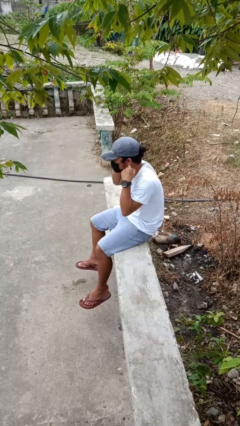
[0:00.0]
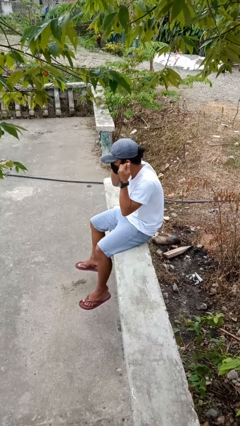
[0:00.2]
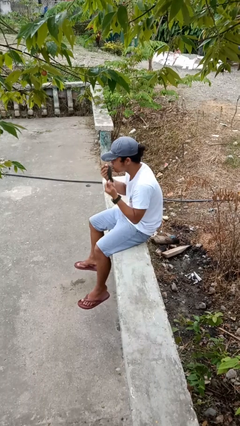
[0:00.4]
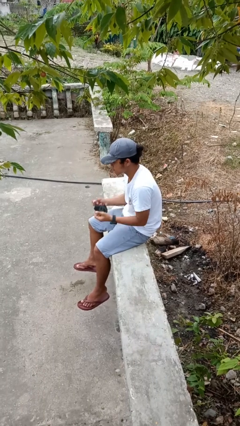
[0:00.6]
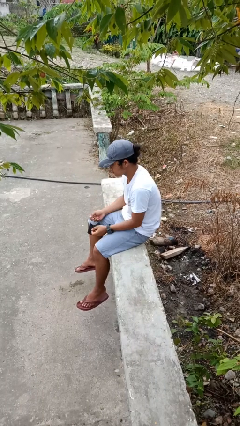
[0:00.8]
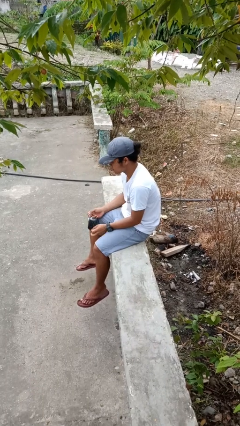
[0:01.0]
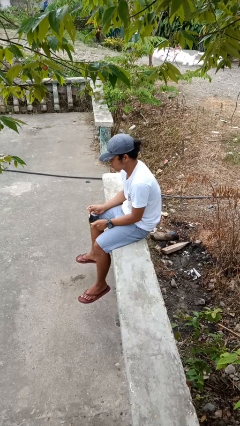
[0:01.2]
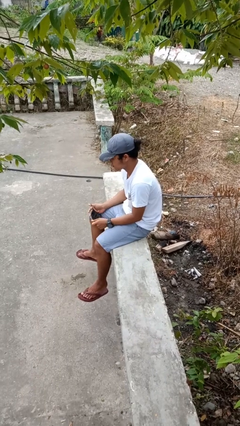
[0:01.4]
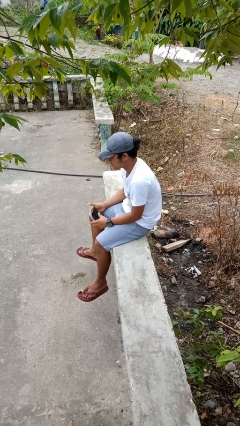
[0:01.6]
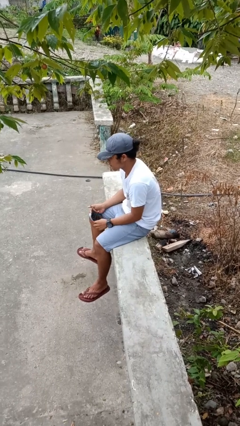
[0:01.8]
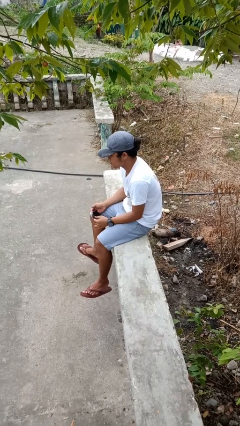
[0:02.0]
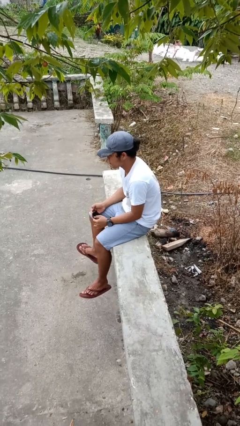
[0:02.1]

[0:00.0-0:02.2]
person takes off facemask

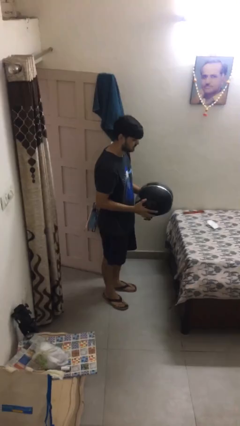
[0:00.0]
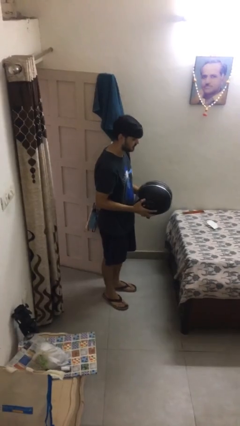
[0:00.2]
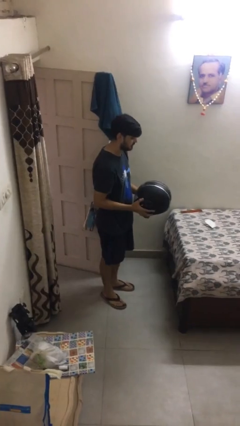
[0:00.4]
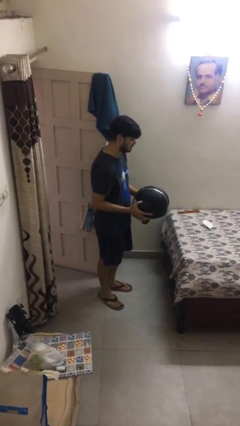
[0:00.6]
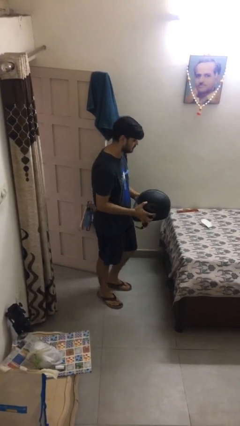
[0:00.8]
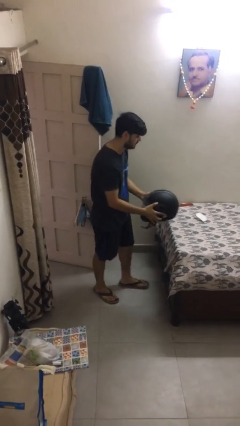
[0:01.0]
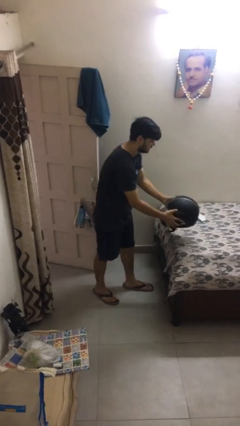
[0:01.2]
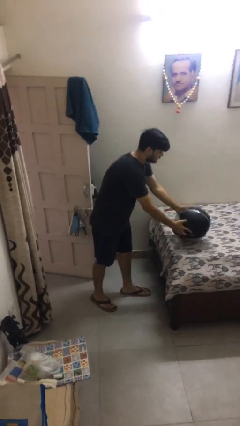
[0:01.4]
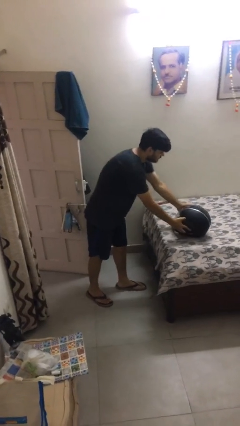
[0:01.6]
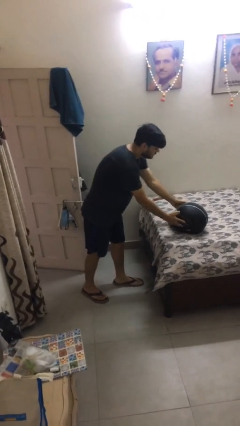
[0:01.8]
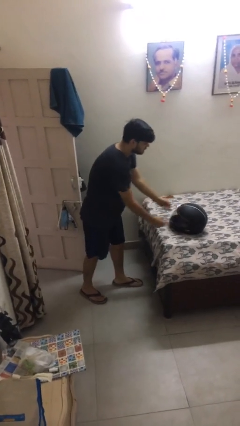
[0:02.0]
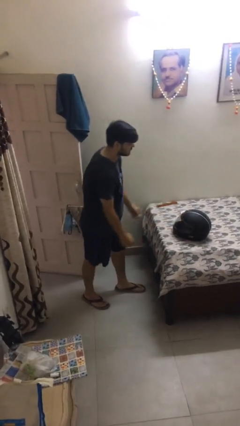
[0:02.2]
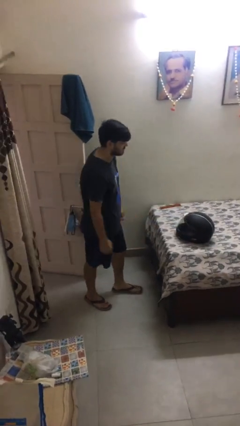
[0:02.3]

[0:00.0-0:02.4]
person puts down object on bed

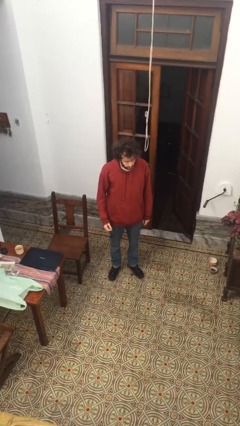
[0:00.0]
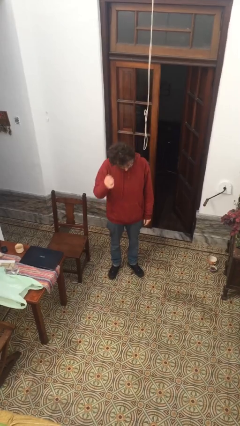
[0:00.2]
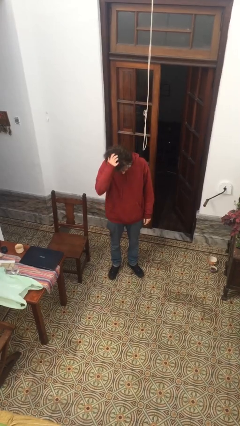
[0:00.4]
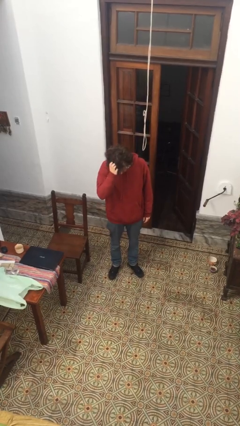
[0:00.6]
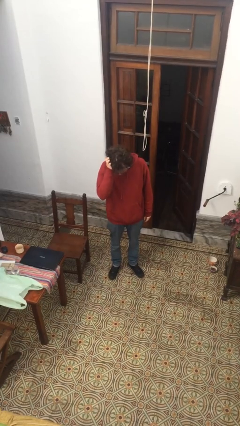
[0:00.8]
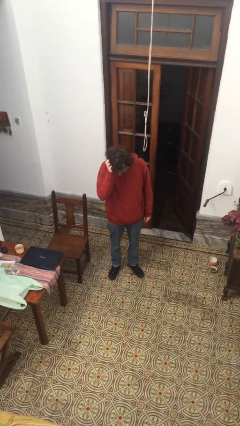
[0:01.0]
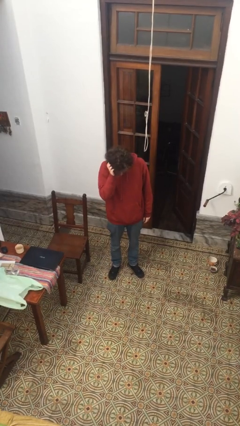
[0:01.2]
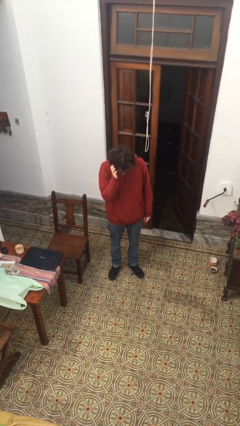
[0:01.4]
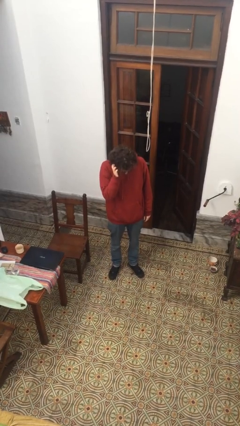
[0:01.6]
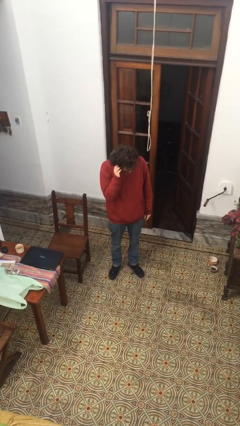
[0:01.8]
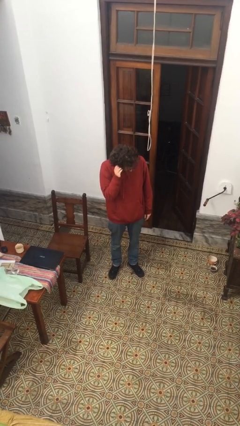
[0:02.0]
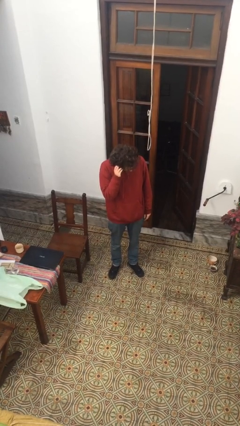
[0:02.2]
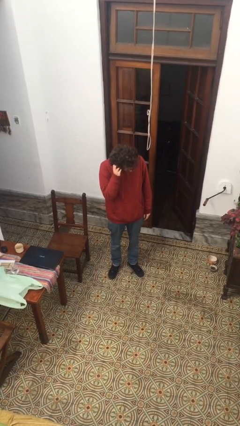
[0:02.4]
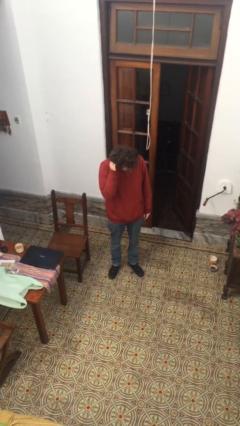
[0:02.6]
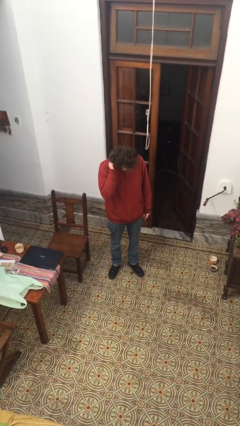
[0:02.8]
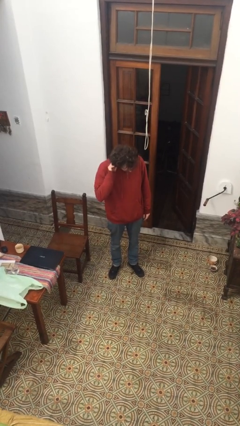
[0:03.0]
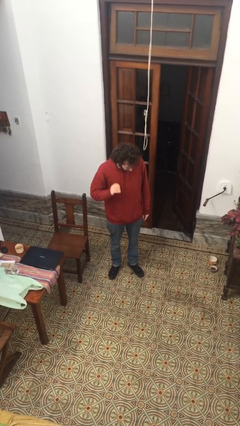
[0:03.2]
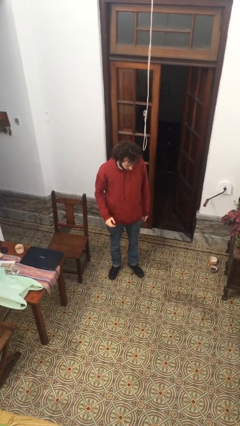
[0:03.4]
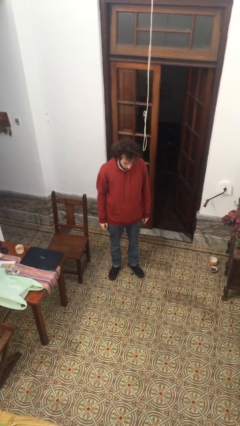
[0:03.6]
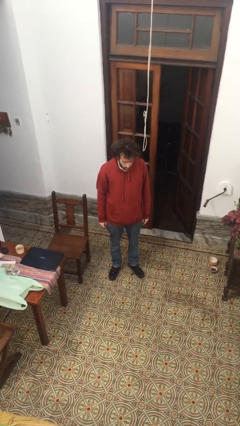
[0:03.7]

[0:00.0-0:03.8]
person scratches face

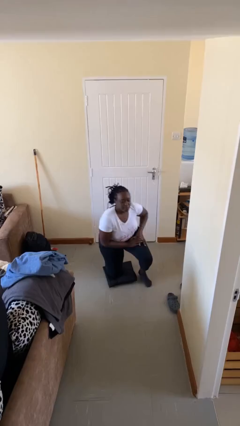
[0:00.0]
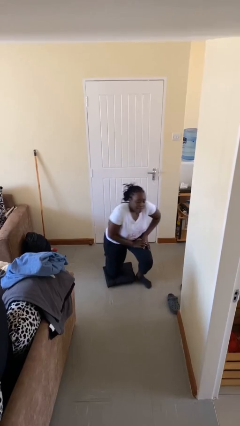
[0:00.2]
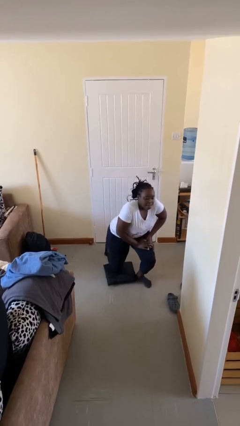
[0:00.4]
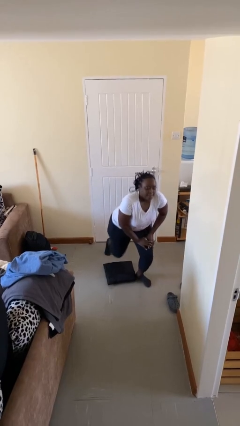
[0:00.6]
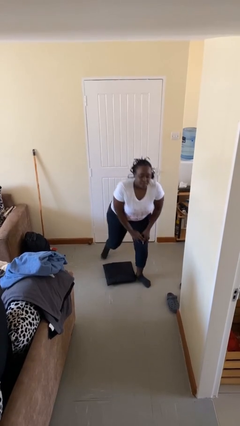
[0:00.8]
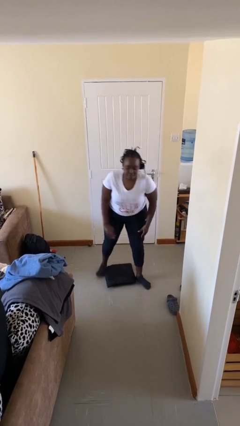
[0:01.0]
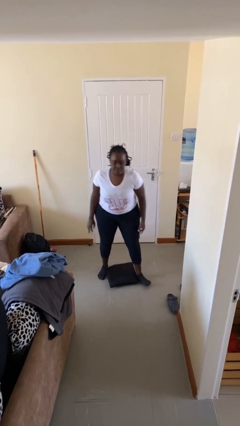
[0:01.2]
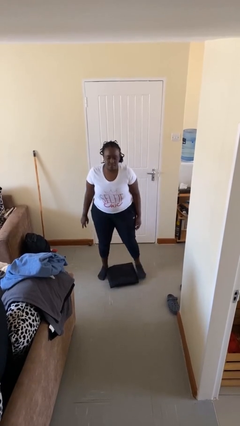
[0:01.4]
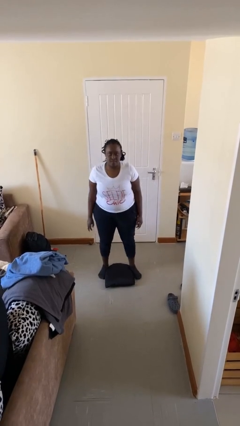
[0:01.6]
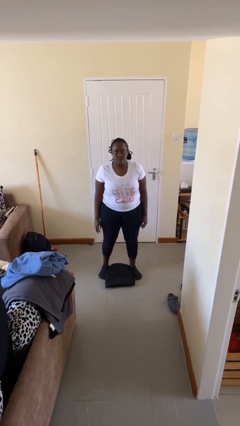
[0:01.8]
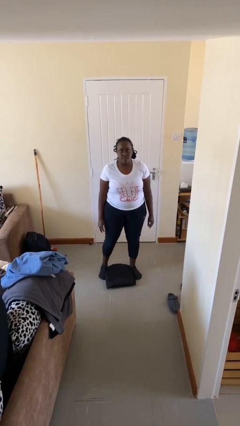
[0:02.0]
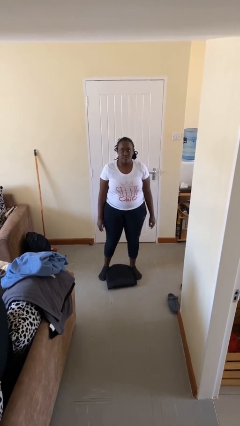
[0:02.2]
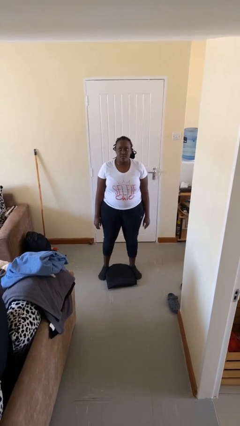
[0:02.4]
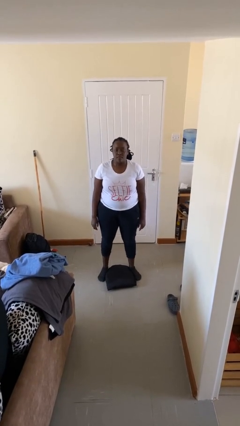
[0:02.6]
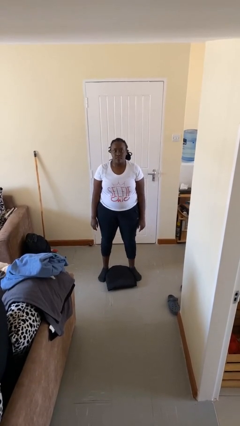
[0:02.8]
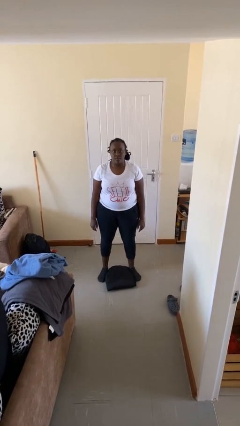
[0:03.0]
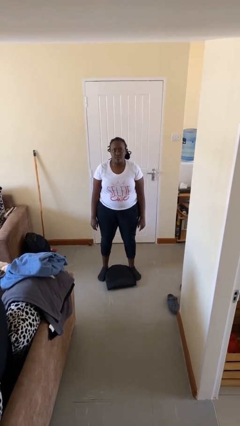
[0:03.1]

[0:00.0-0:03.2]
person stands up from floor

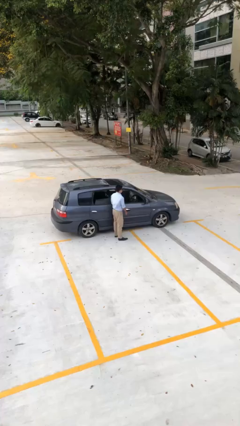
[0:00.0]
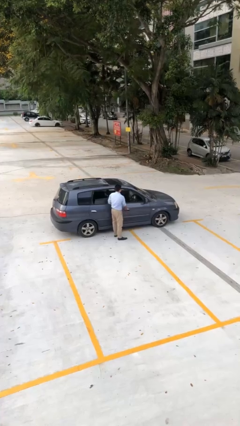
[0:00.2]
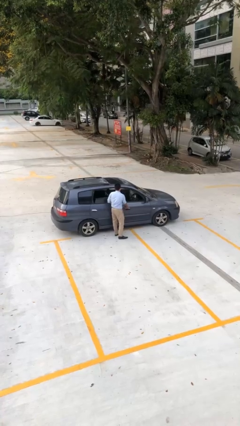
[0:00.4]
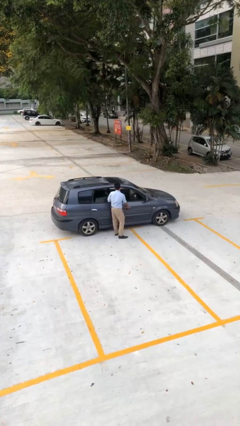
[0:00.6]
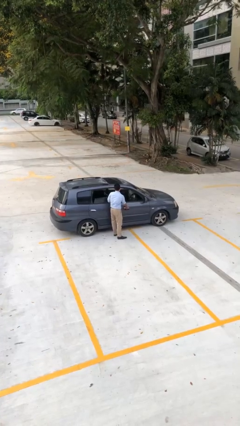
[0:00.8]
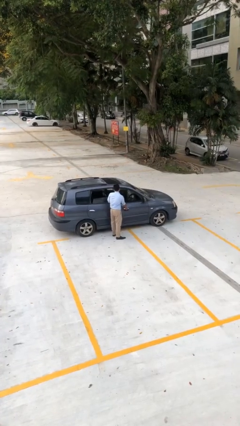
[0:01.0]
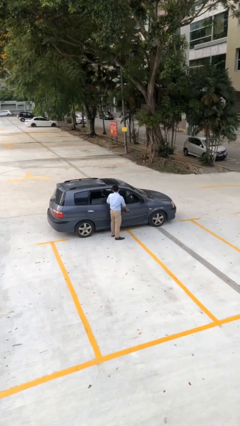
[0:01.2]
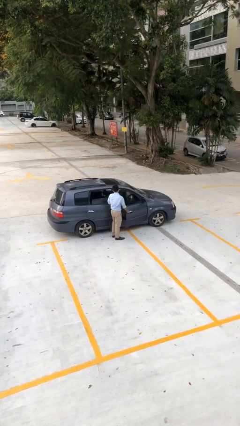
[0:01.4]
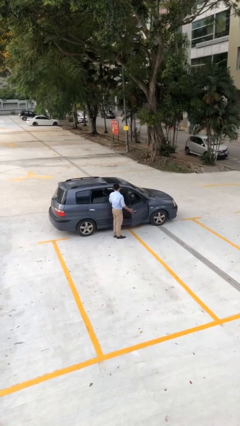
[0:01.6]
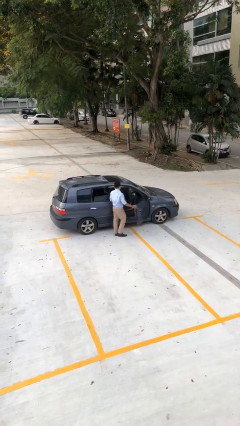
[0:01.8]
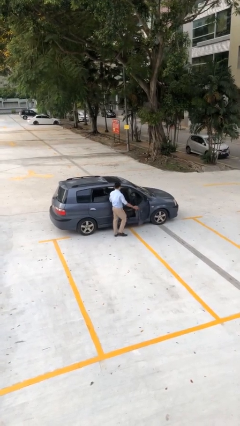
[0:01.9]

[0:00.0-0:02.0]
person opens car door

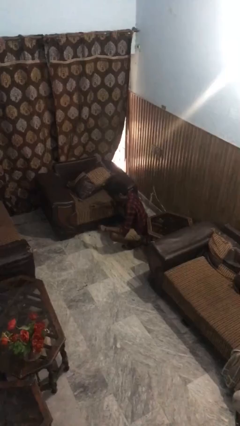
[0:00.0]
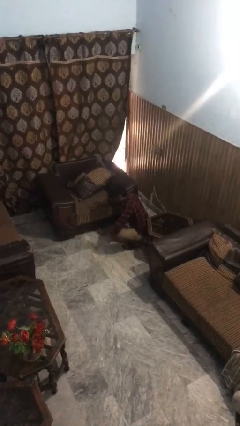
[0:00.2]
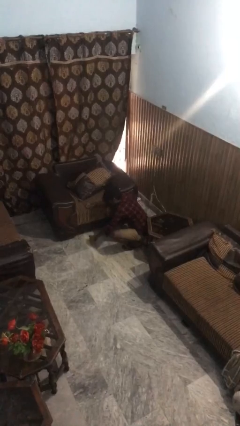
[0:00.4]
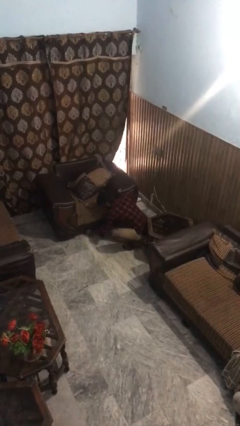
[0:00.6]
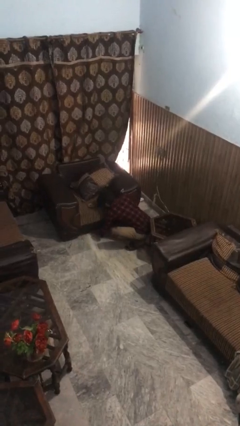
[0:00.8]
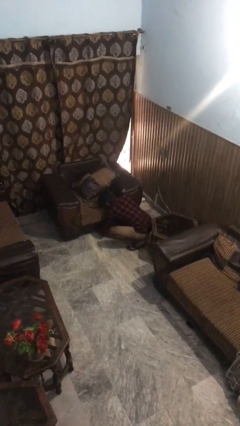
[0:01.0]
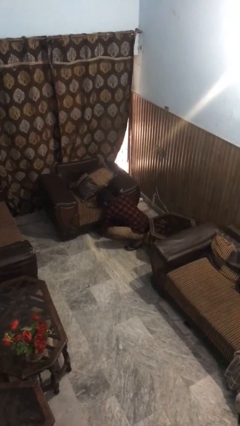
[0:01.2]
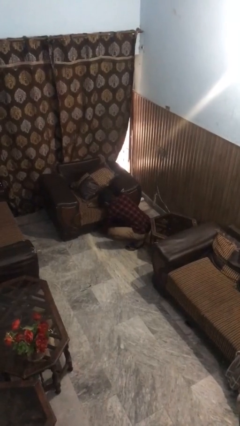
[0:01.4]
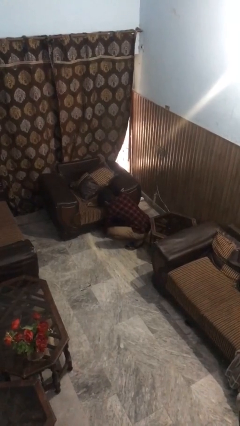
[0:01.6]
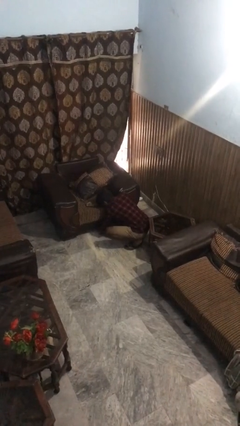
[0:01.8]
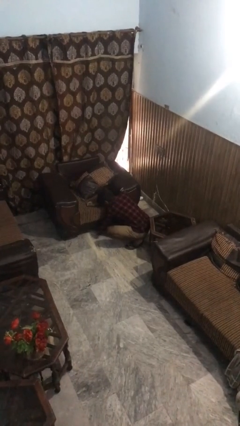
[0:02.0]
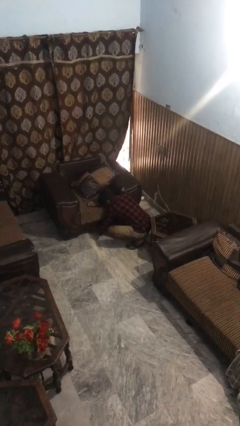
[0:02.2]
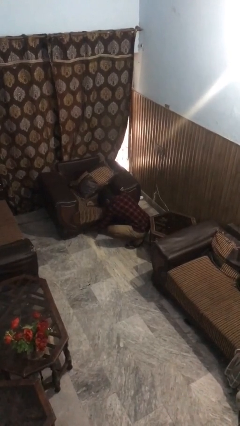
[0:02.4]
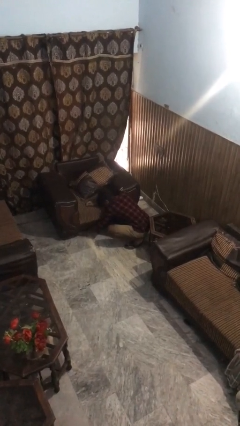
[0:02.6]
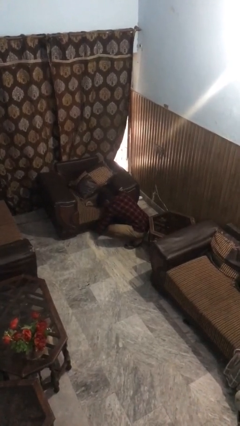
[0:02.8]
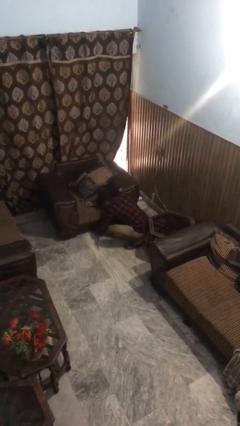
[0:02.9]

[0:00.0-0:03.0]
person searches under couch

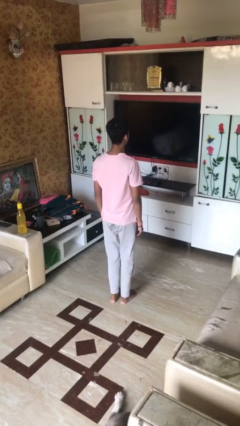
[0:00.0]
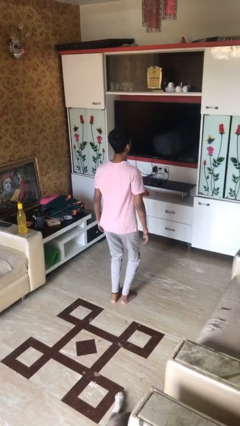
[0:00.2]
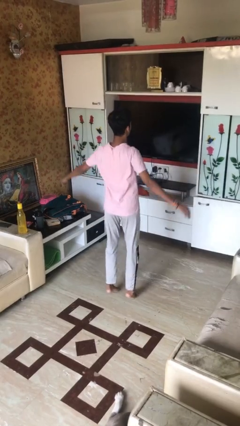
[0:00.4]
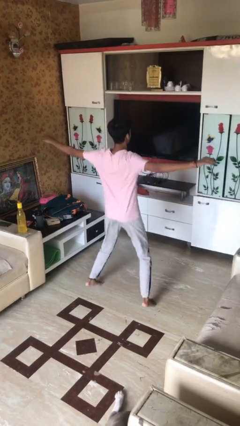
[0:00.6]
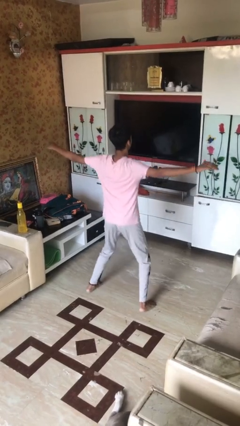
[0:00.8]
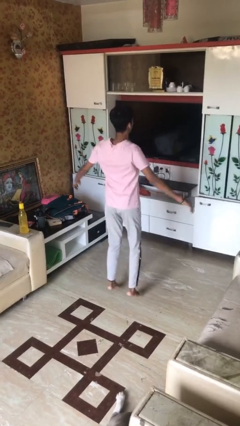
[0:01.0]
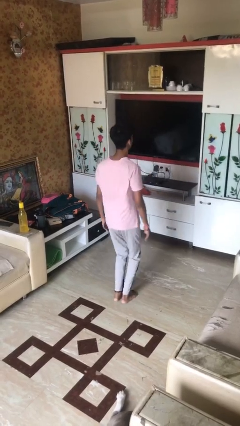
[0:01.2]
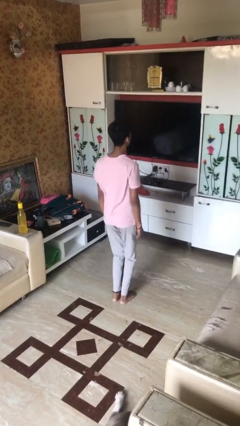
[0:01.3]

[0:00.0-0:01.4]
person exercises with jumping jacks
